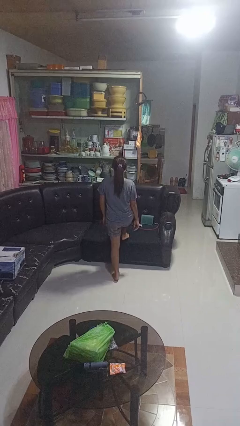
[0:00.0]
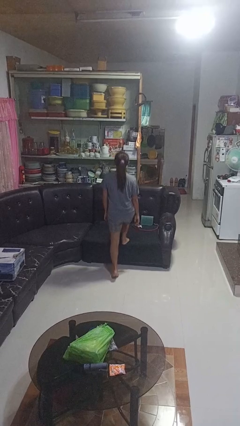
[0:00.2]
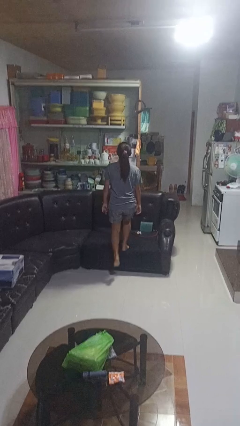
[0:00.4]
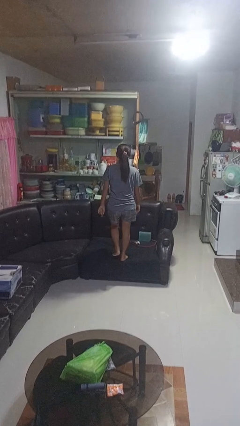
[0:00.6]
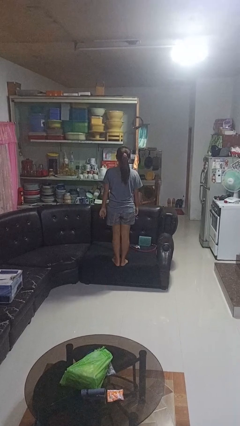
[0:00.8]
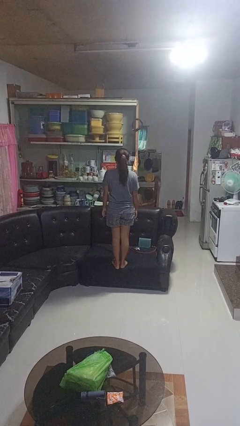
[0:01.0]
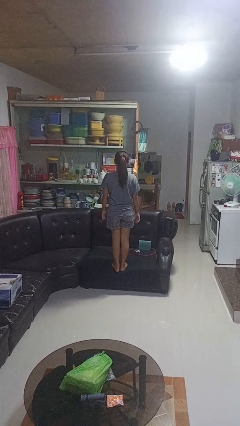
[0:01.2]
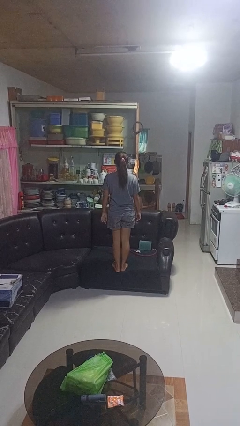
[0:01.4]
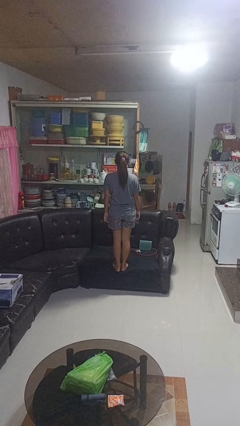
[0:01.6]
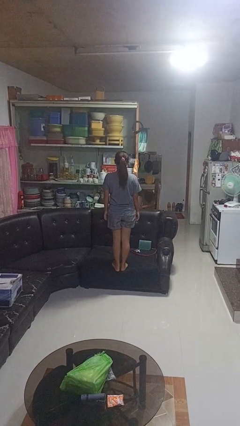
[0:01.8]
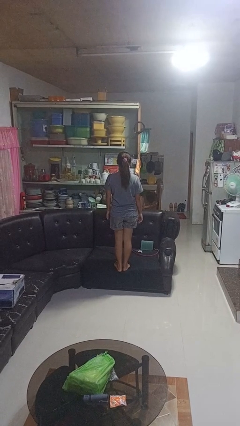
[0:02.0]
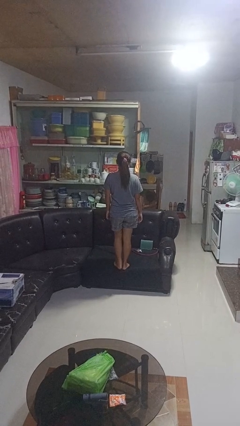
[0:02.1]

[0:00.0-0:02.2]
person climbs on couch

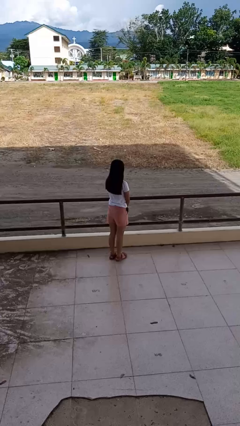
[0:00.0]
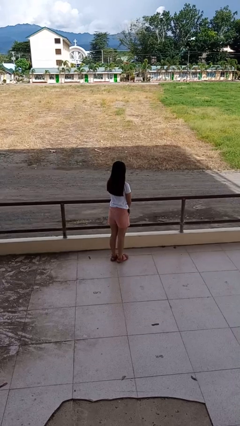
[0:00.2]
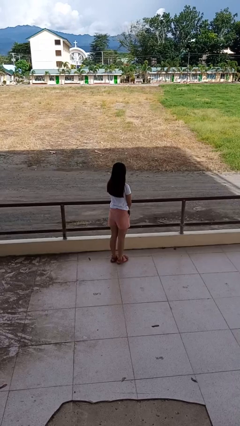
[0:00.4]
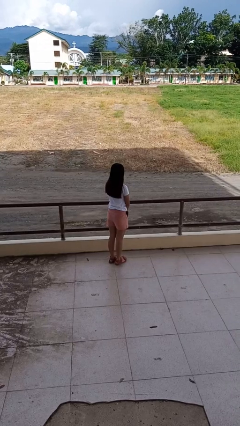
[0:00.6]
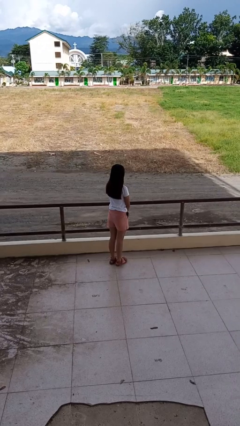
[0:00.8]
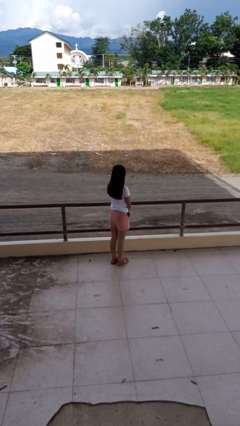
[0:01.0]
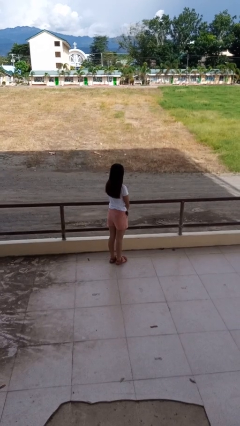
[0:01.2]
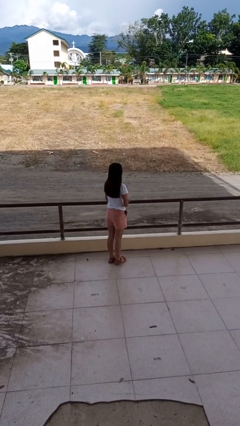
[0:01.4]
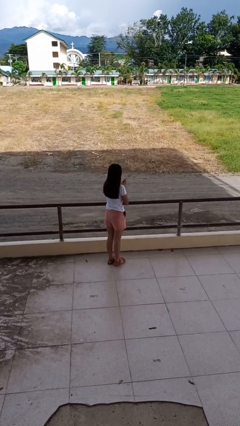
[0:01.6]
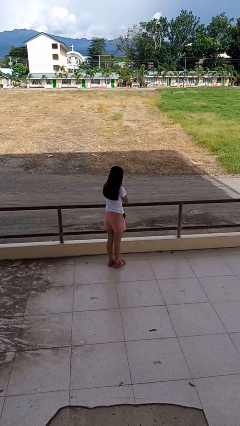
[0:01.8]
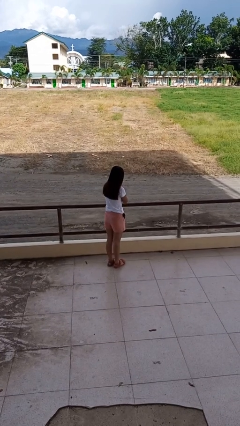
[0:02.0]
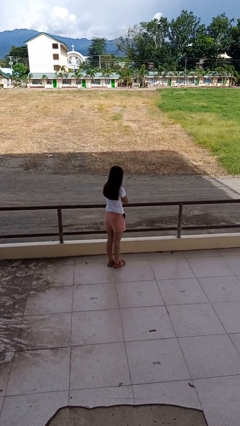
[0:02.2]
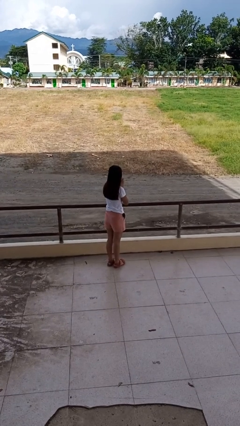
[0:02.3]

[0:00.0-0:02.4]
person sneezes into hand

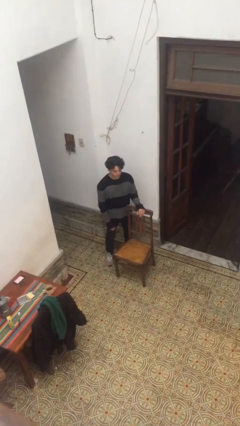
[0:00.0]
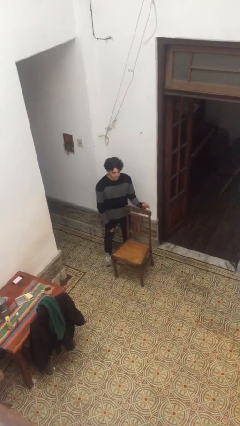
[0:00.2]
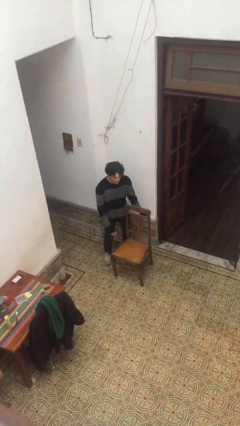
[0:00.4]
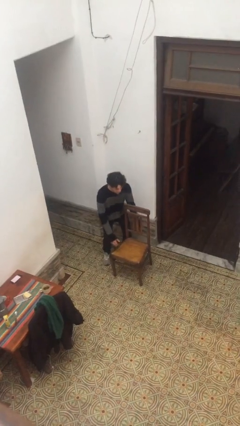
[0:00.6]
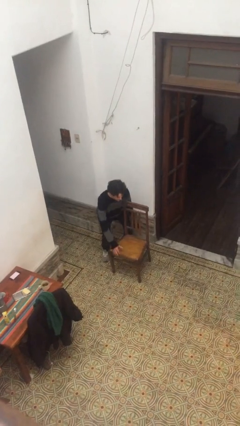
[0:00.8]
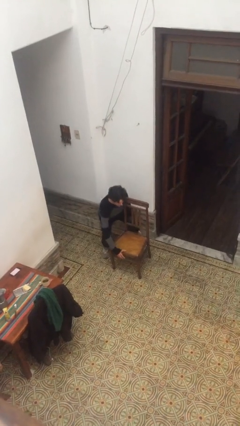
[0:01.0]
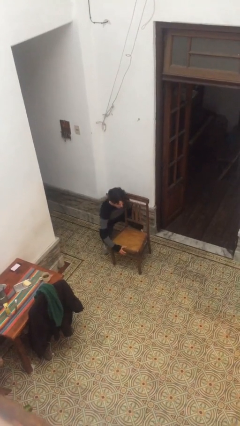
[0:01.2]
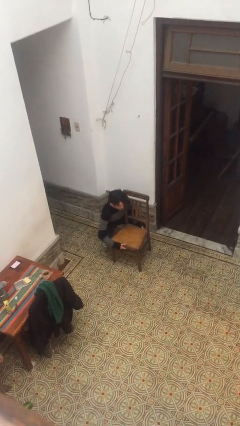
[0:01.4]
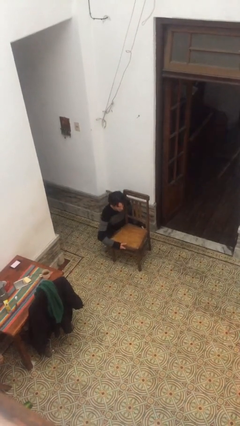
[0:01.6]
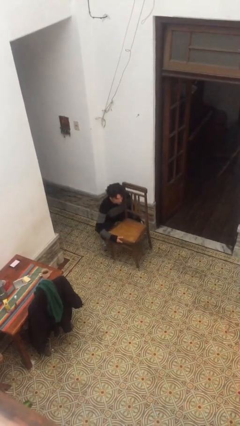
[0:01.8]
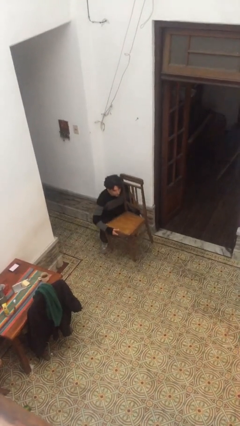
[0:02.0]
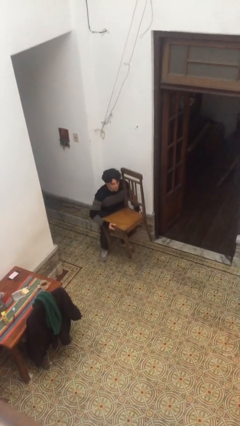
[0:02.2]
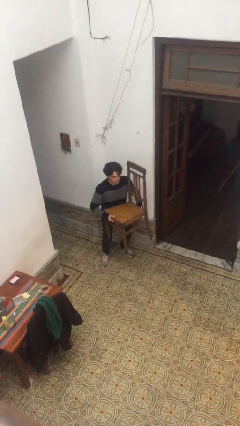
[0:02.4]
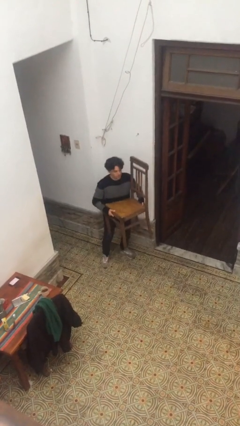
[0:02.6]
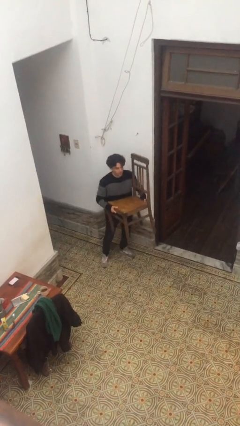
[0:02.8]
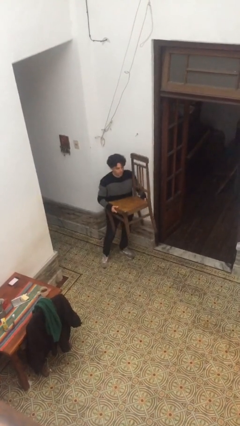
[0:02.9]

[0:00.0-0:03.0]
person picks up object from floor

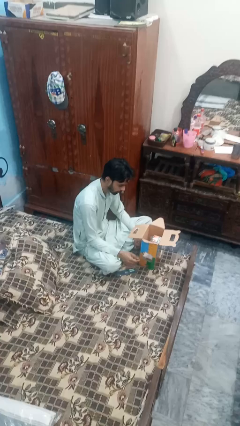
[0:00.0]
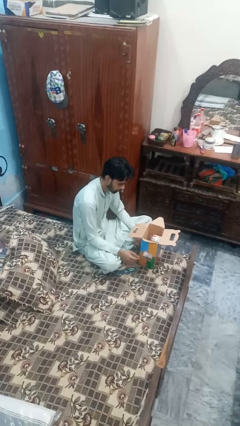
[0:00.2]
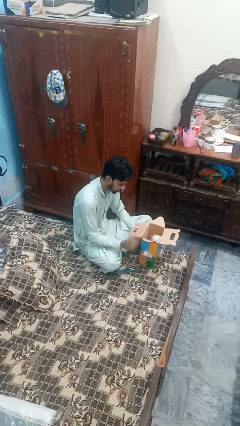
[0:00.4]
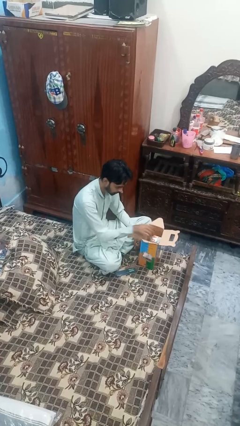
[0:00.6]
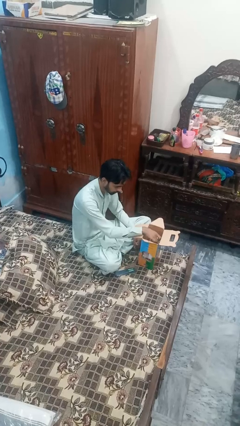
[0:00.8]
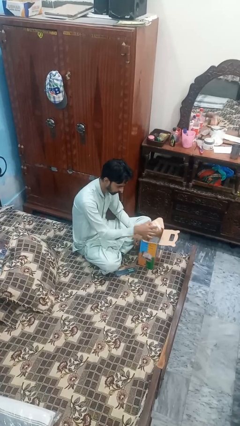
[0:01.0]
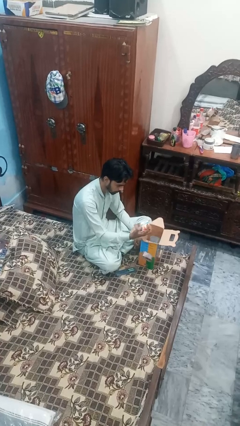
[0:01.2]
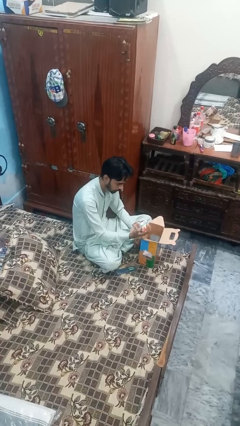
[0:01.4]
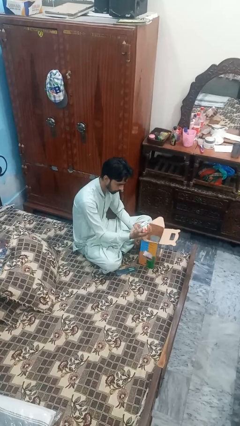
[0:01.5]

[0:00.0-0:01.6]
person takes object from box

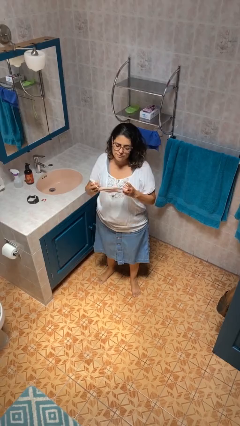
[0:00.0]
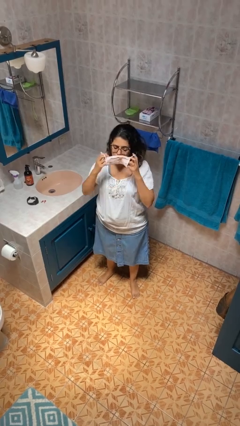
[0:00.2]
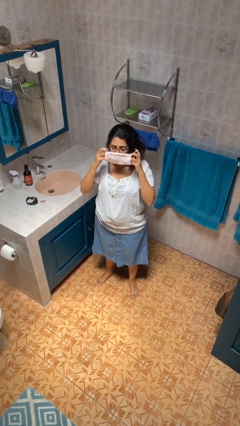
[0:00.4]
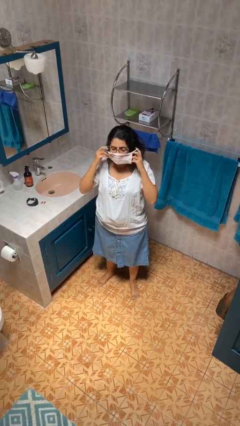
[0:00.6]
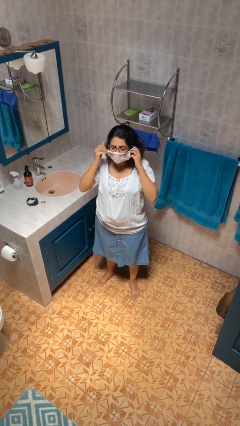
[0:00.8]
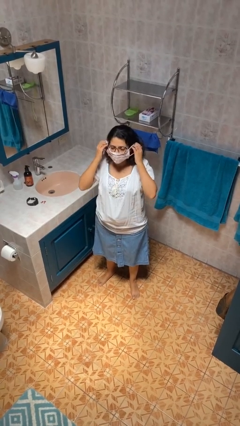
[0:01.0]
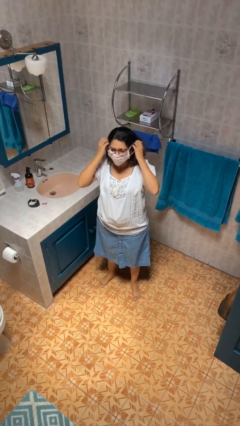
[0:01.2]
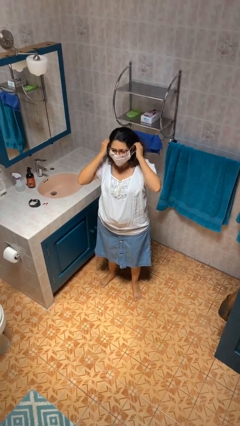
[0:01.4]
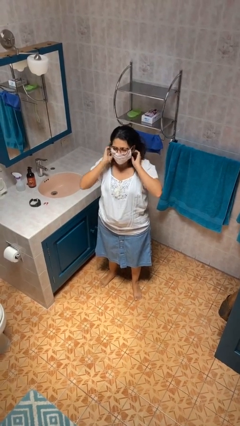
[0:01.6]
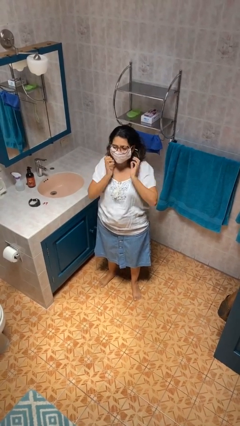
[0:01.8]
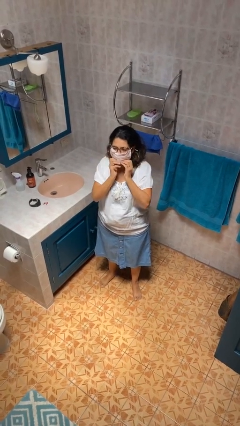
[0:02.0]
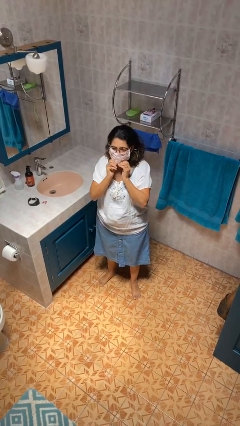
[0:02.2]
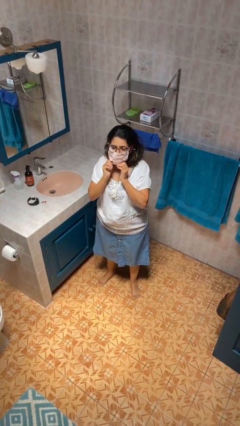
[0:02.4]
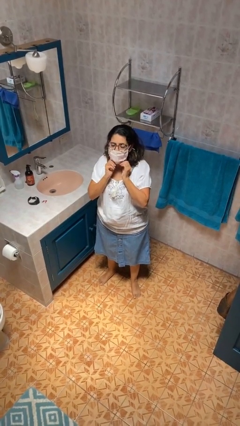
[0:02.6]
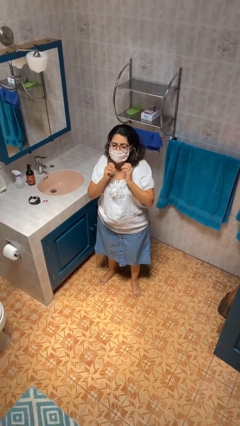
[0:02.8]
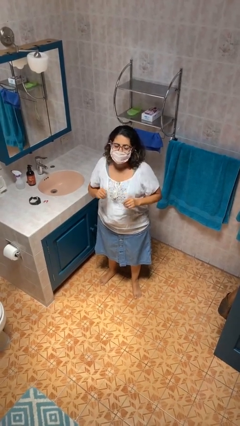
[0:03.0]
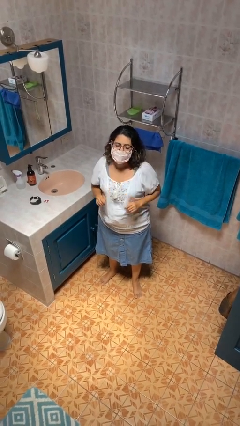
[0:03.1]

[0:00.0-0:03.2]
person puts on facemask

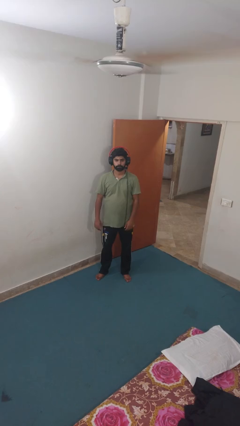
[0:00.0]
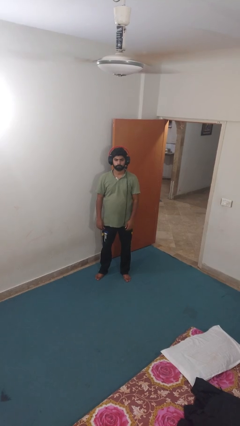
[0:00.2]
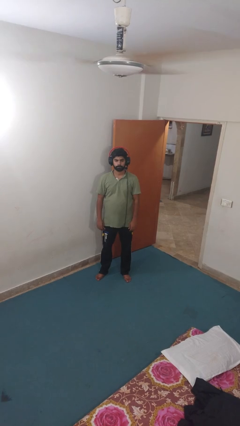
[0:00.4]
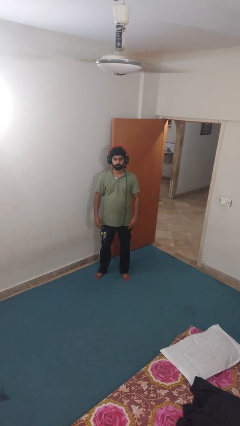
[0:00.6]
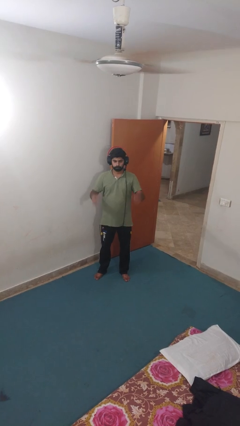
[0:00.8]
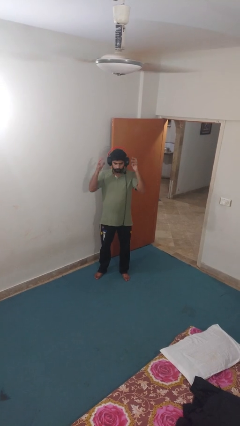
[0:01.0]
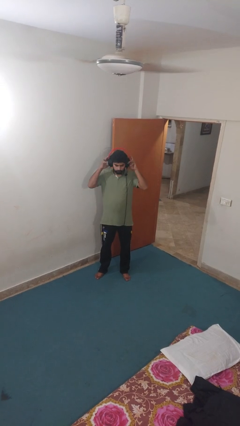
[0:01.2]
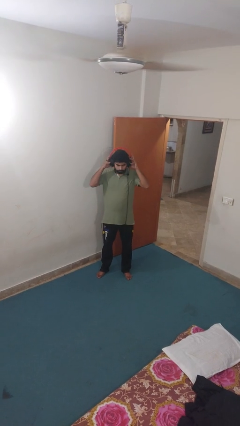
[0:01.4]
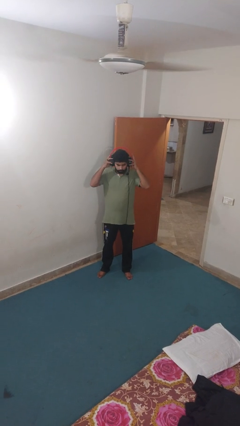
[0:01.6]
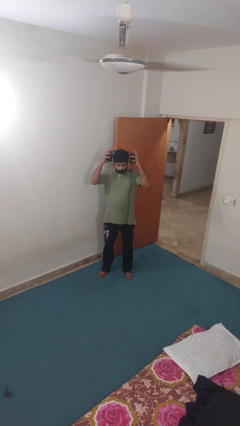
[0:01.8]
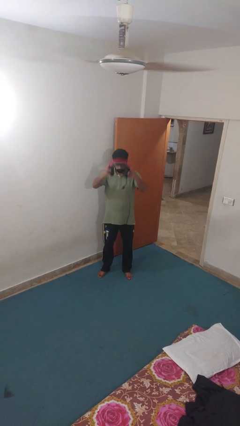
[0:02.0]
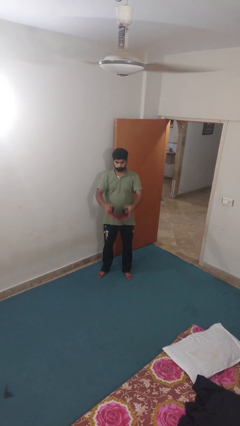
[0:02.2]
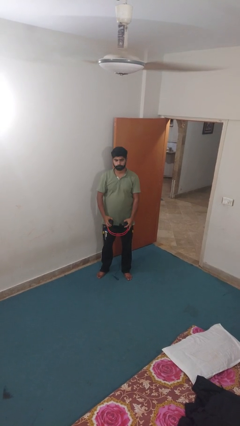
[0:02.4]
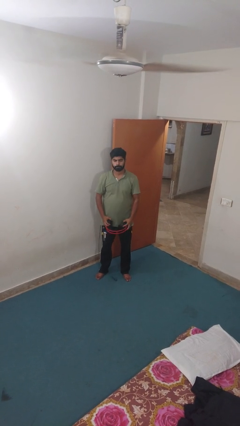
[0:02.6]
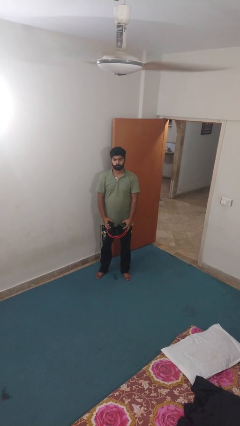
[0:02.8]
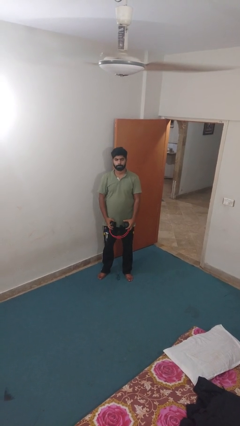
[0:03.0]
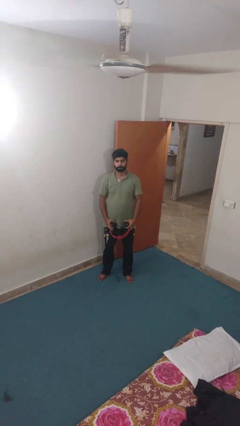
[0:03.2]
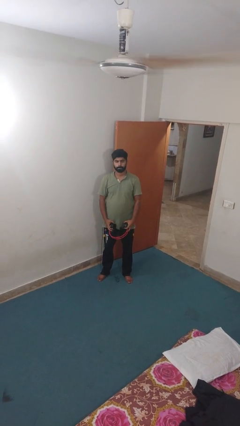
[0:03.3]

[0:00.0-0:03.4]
person takes off headphones

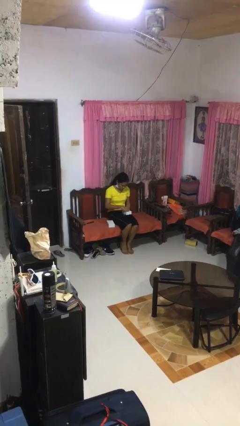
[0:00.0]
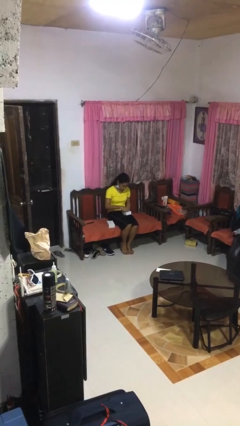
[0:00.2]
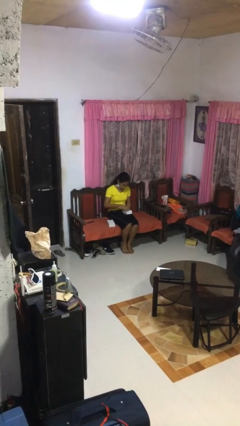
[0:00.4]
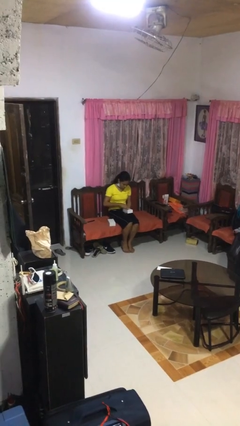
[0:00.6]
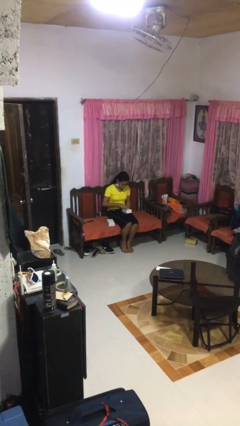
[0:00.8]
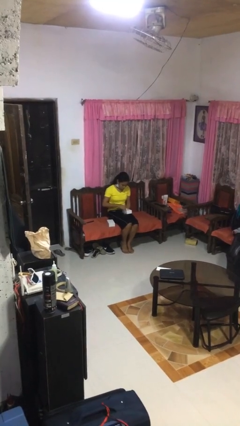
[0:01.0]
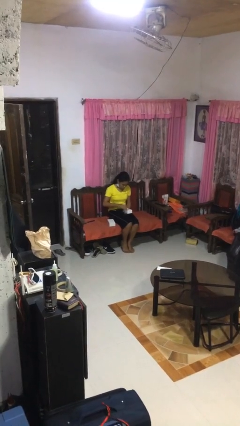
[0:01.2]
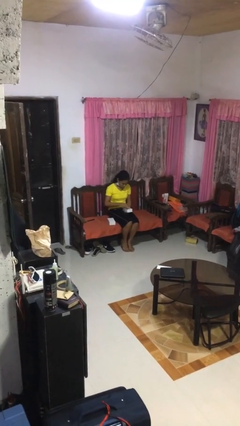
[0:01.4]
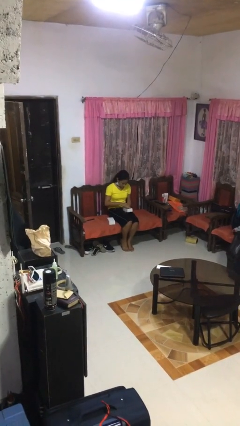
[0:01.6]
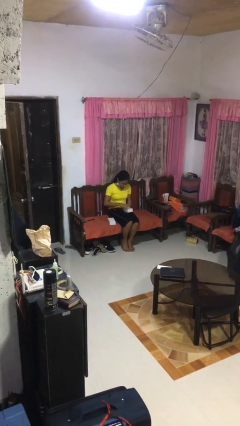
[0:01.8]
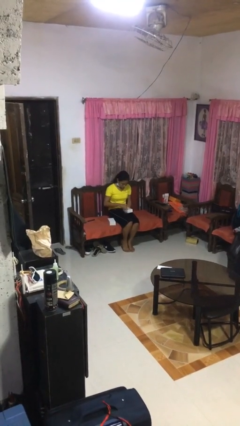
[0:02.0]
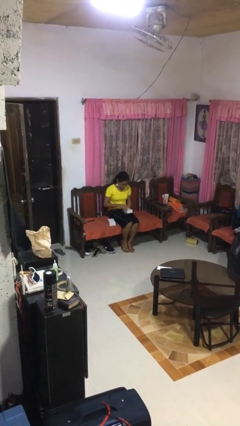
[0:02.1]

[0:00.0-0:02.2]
person searches jewelry box
